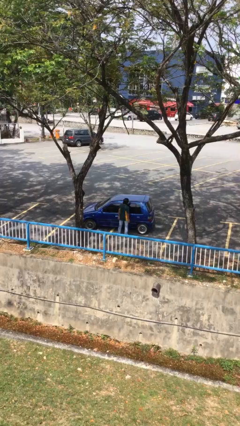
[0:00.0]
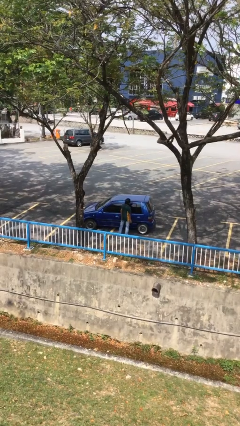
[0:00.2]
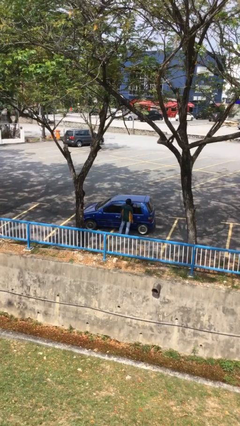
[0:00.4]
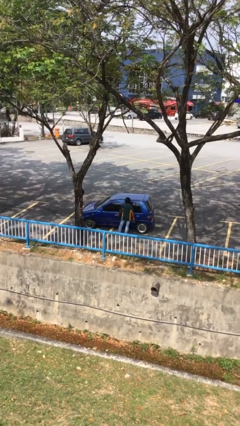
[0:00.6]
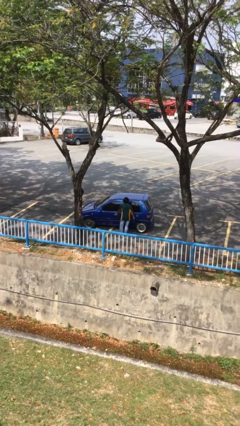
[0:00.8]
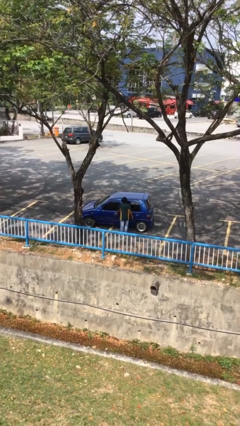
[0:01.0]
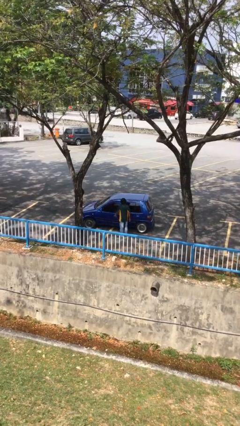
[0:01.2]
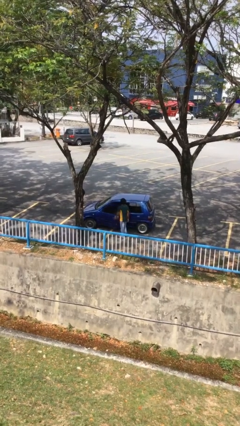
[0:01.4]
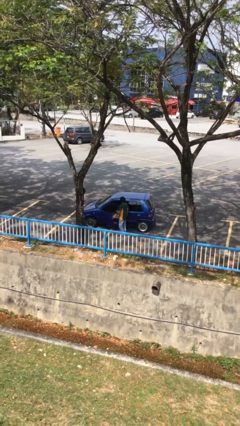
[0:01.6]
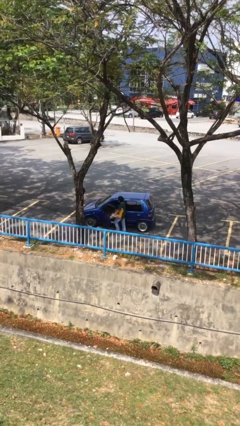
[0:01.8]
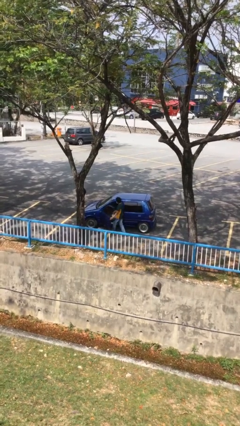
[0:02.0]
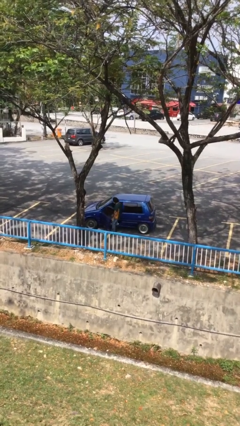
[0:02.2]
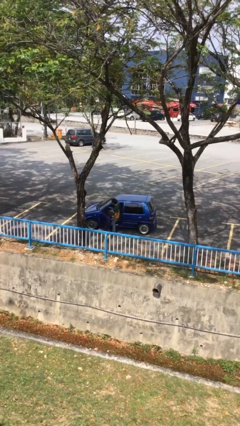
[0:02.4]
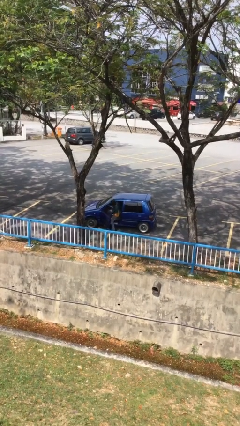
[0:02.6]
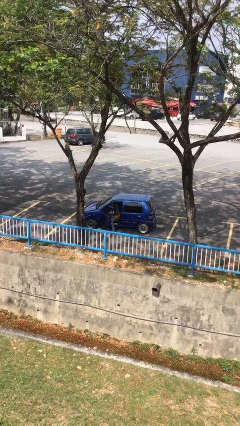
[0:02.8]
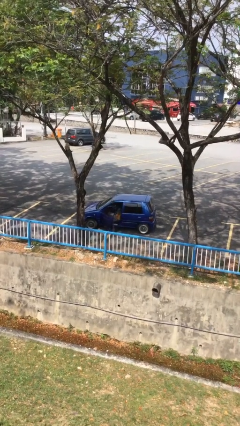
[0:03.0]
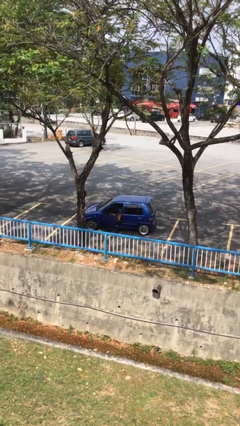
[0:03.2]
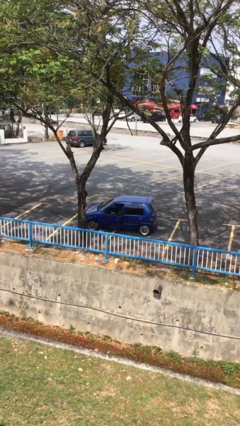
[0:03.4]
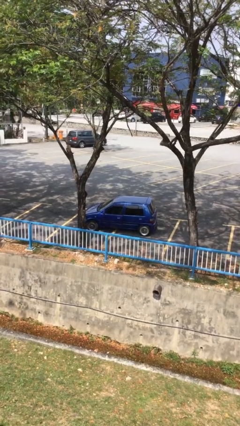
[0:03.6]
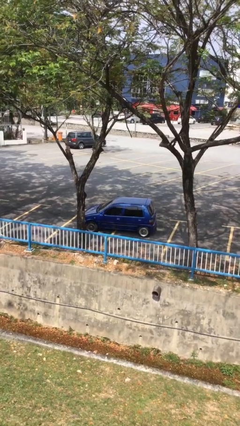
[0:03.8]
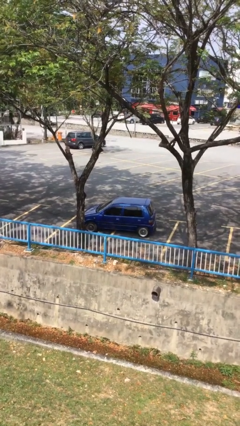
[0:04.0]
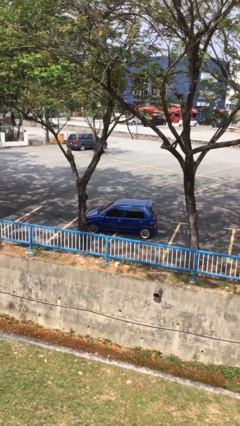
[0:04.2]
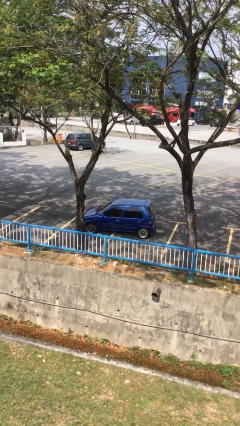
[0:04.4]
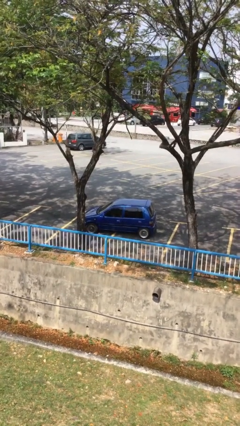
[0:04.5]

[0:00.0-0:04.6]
car picks up person

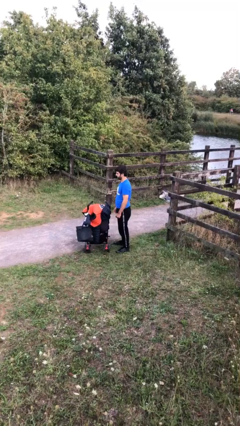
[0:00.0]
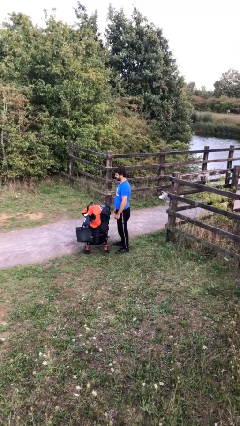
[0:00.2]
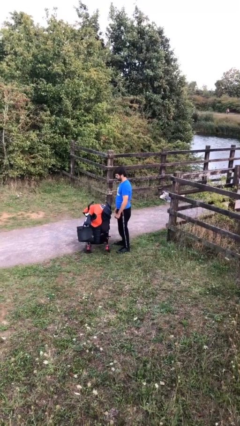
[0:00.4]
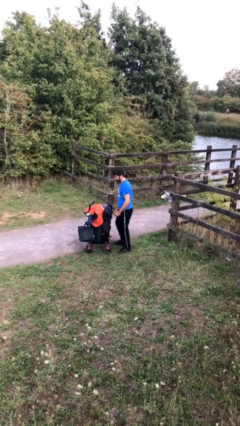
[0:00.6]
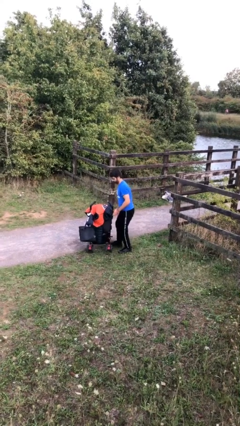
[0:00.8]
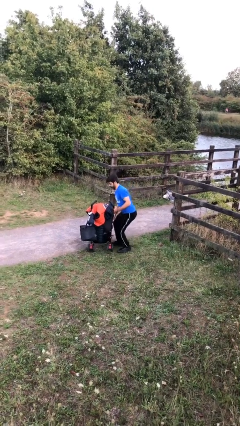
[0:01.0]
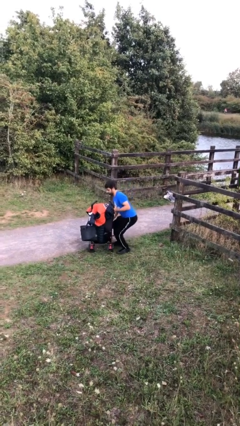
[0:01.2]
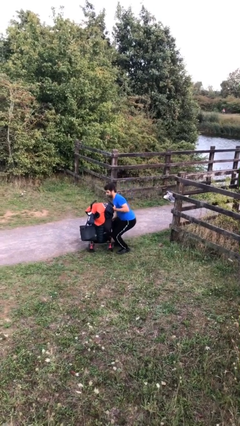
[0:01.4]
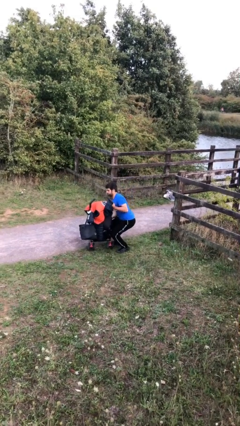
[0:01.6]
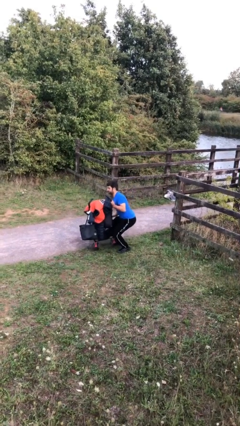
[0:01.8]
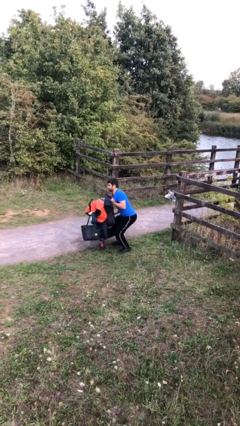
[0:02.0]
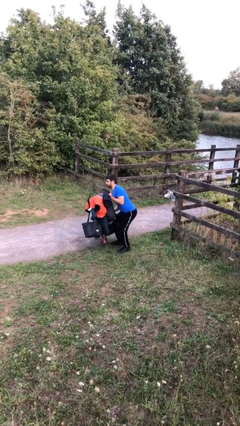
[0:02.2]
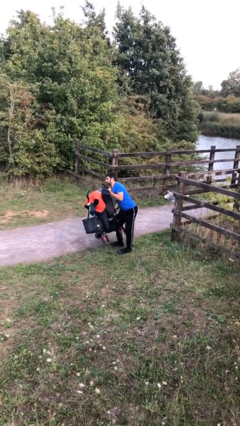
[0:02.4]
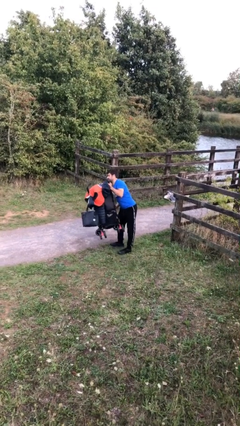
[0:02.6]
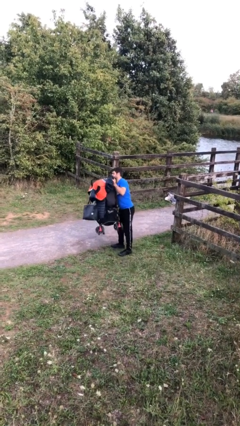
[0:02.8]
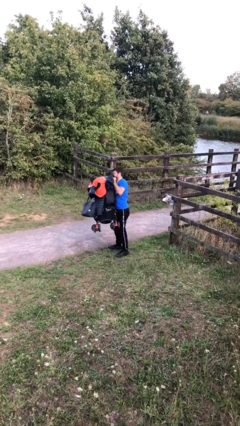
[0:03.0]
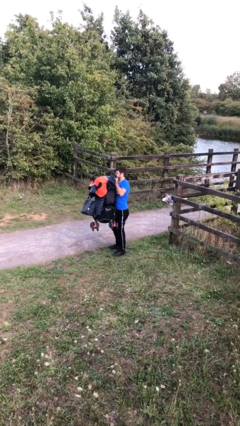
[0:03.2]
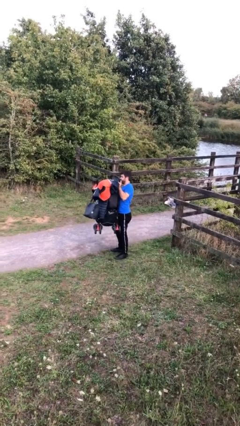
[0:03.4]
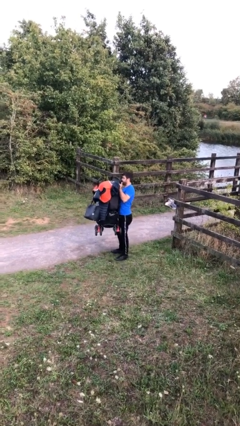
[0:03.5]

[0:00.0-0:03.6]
person picks up object from floor

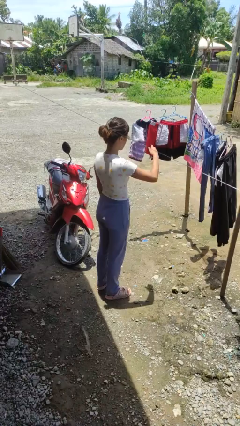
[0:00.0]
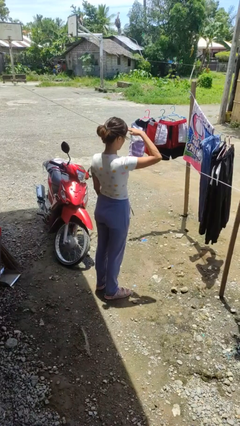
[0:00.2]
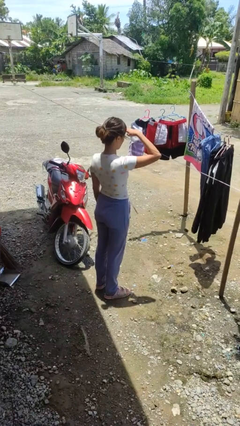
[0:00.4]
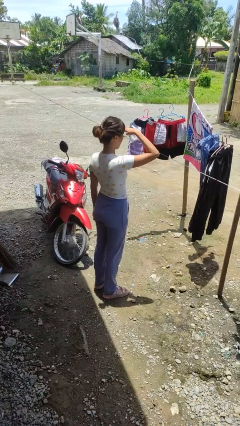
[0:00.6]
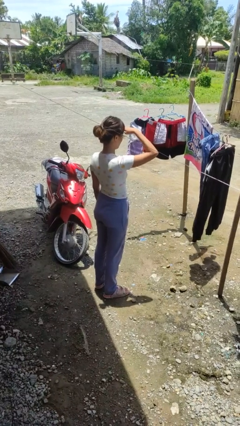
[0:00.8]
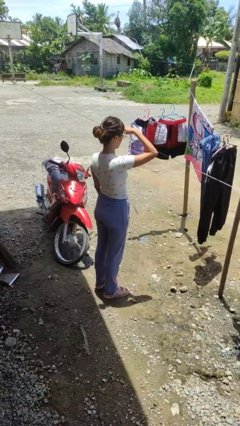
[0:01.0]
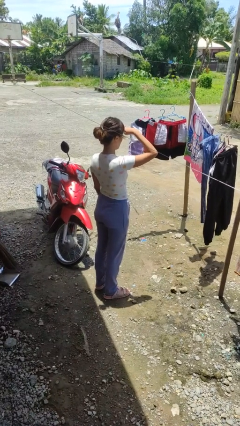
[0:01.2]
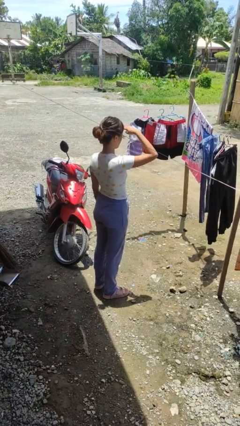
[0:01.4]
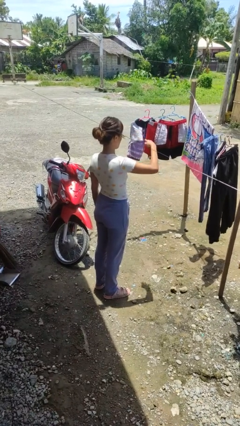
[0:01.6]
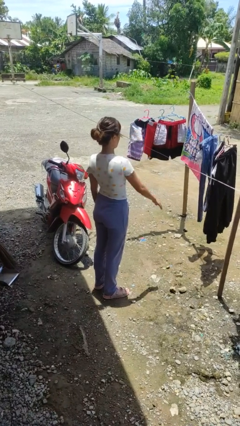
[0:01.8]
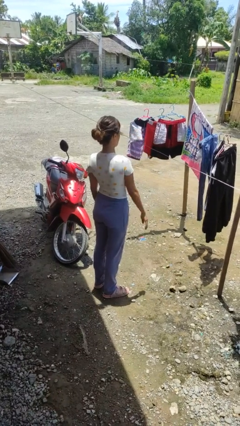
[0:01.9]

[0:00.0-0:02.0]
person shades eyes

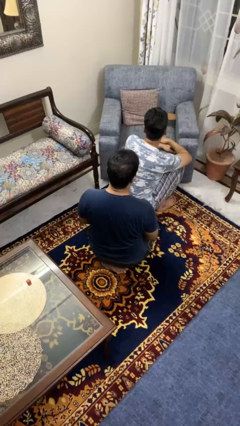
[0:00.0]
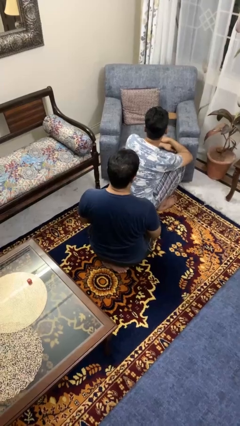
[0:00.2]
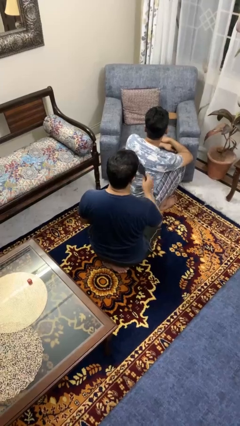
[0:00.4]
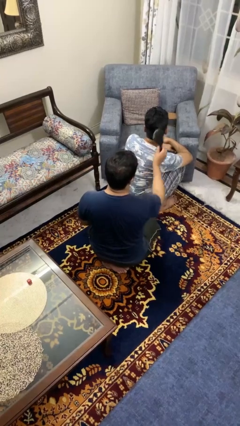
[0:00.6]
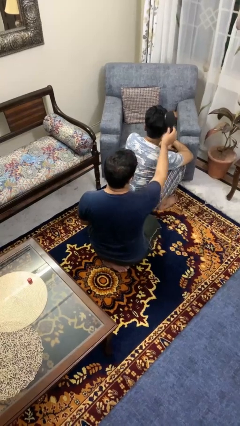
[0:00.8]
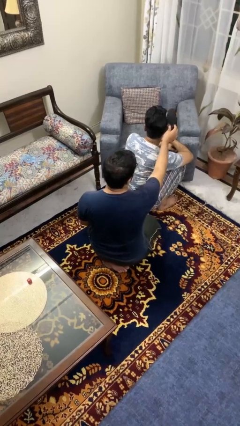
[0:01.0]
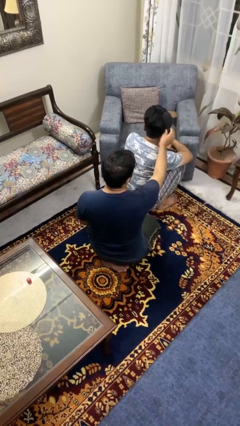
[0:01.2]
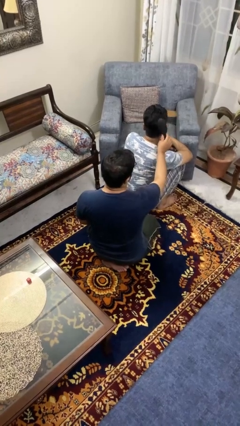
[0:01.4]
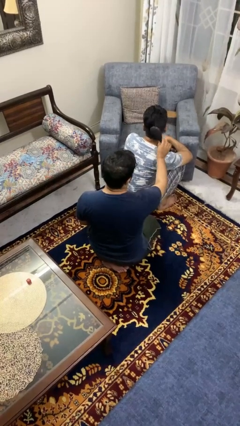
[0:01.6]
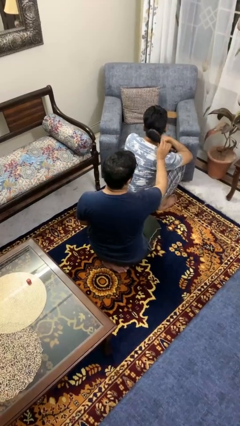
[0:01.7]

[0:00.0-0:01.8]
person brushes hair of person

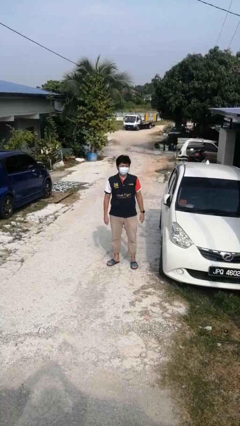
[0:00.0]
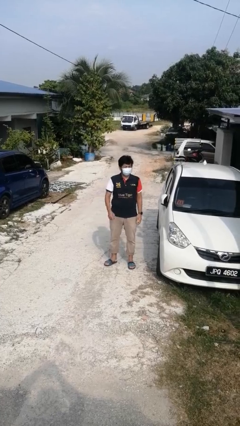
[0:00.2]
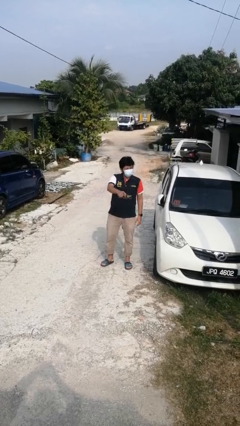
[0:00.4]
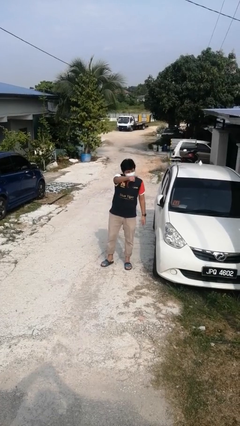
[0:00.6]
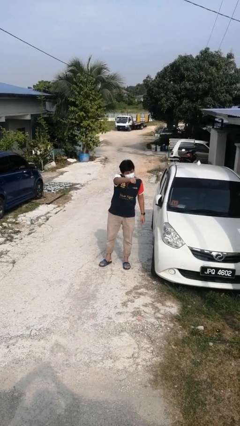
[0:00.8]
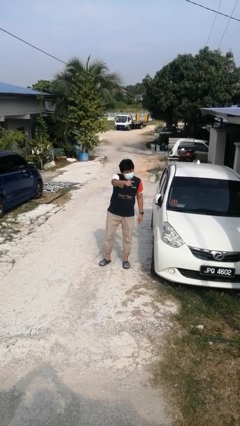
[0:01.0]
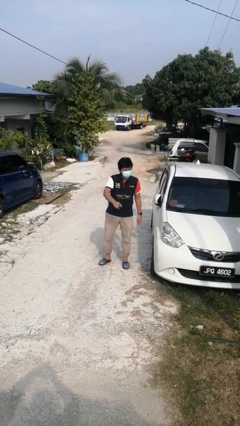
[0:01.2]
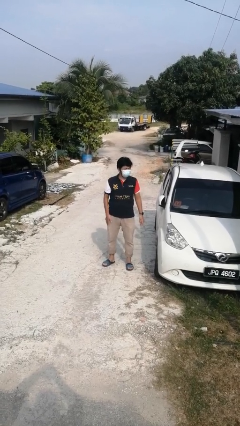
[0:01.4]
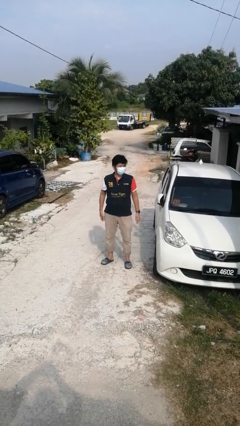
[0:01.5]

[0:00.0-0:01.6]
person points at person

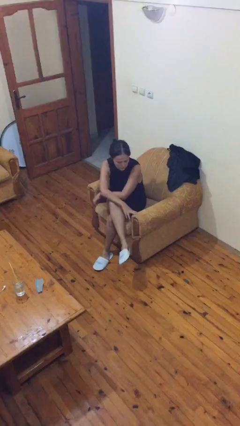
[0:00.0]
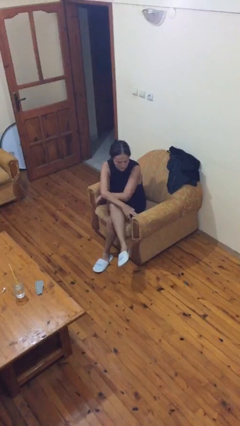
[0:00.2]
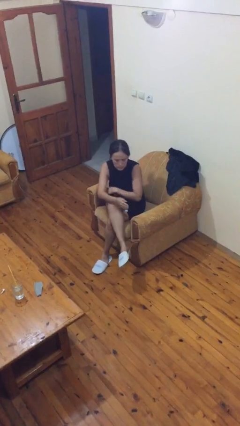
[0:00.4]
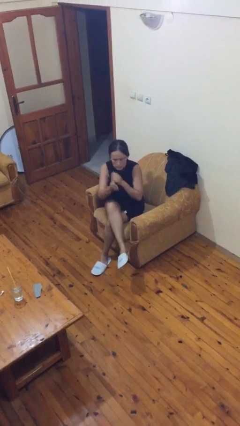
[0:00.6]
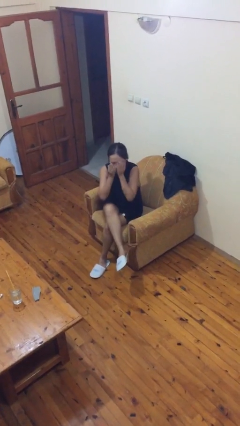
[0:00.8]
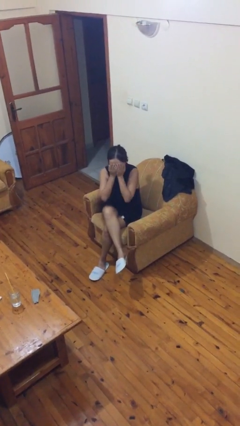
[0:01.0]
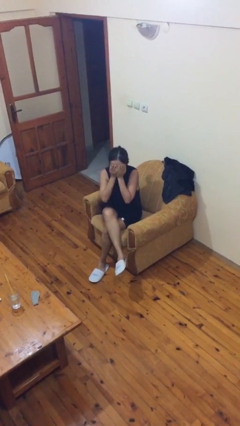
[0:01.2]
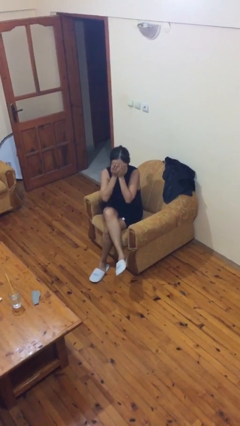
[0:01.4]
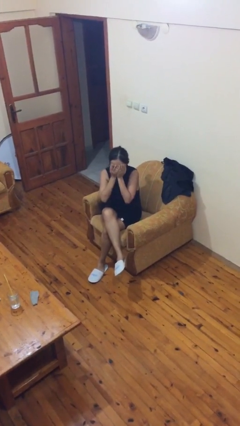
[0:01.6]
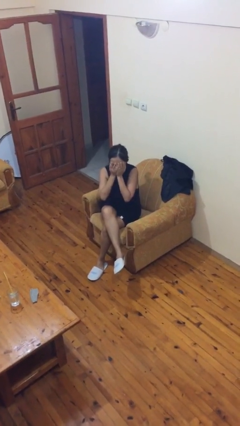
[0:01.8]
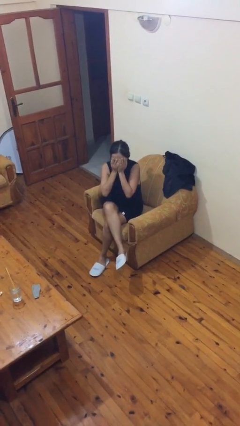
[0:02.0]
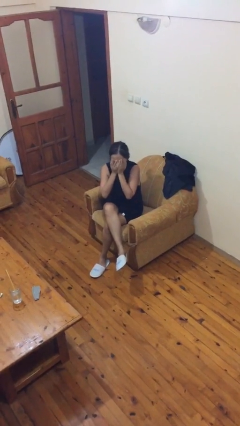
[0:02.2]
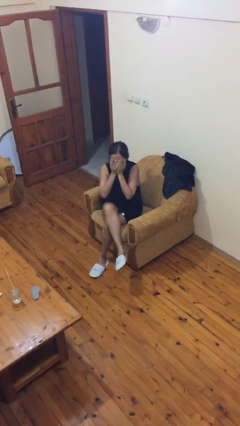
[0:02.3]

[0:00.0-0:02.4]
person covers face with hands

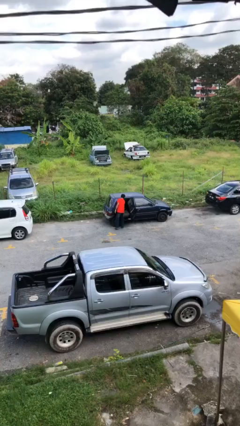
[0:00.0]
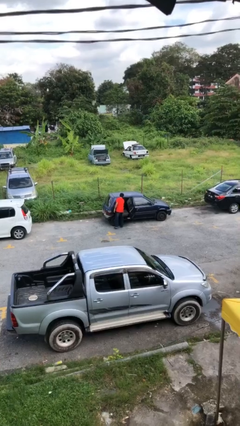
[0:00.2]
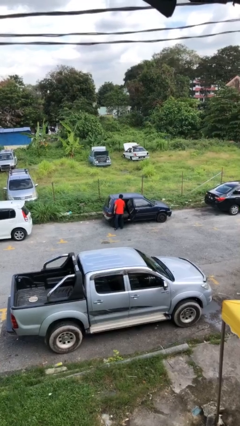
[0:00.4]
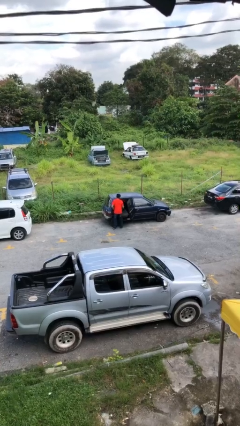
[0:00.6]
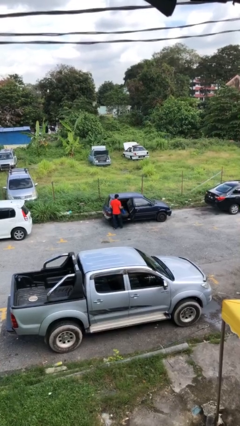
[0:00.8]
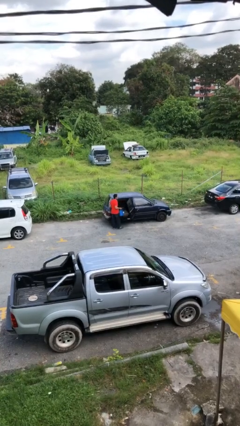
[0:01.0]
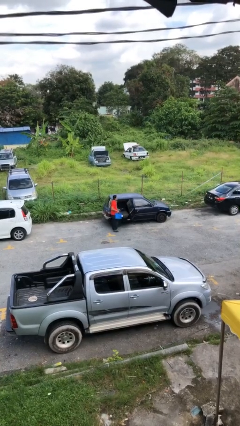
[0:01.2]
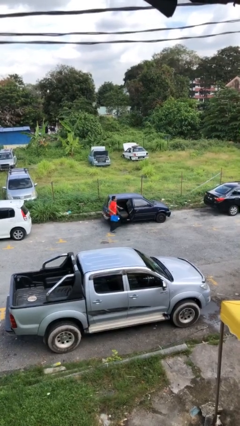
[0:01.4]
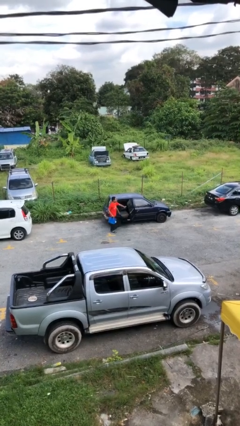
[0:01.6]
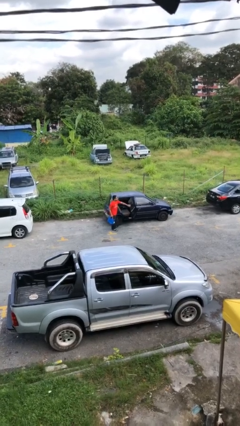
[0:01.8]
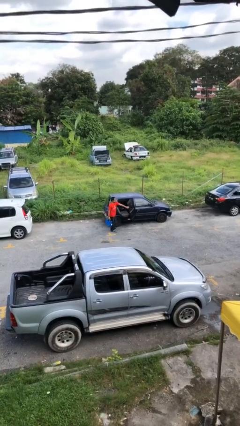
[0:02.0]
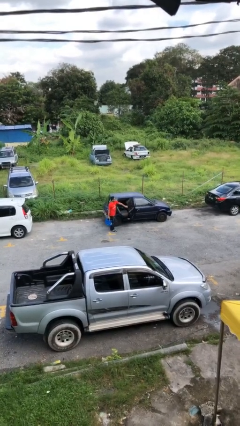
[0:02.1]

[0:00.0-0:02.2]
person unloads car
